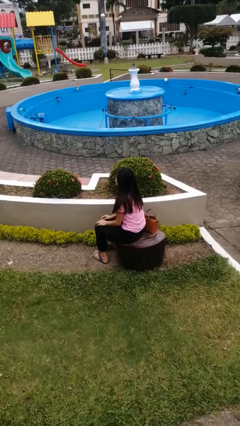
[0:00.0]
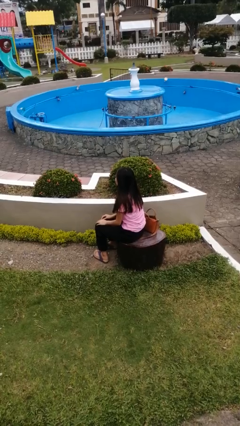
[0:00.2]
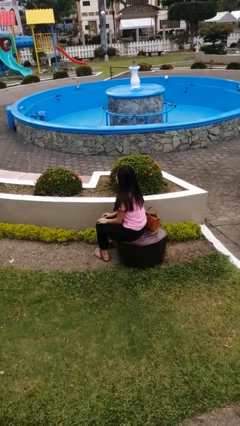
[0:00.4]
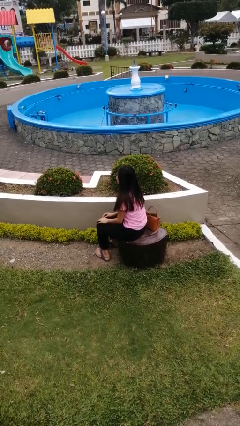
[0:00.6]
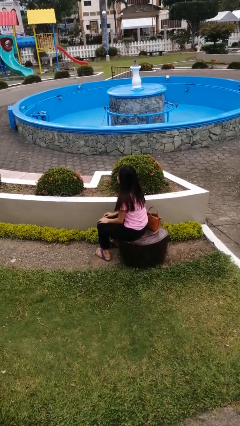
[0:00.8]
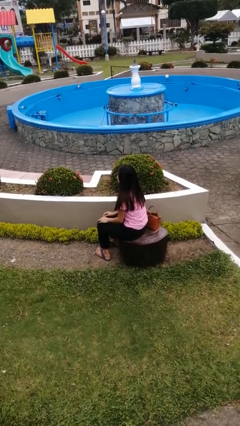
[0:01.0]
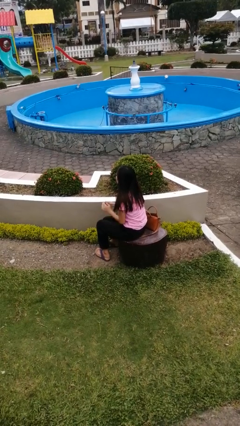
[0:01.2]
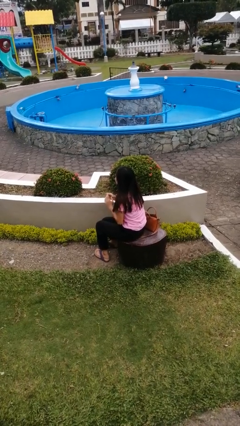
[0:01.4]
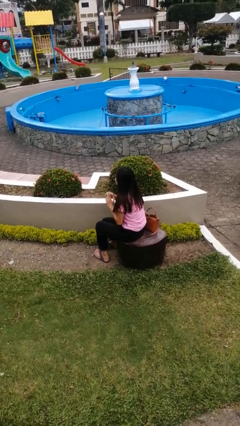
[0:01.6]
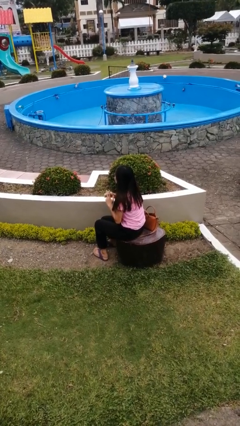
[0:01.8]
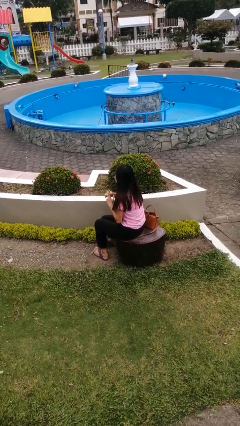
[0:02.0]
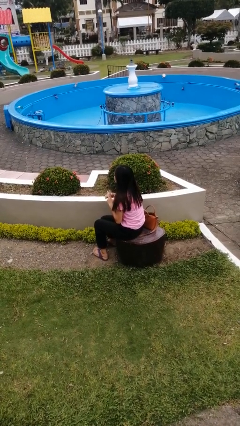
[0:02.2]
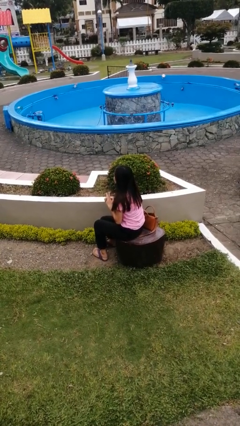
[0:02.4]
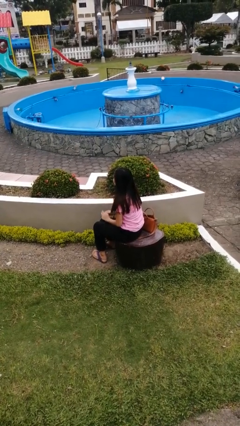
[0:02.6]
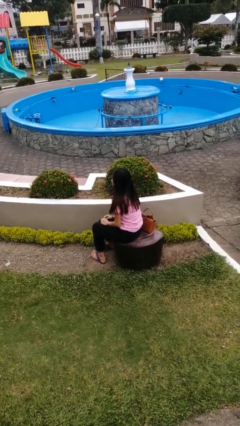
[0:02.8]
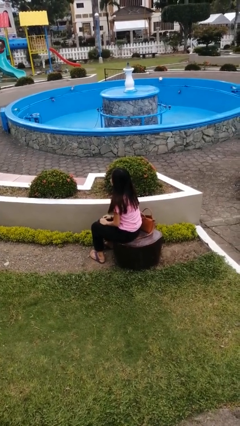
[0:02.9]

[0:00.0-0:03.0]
person puts on ring

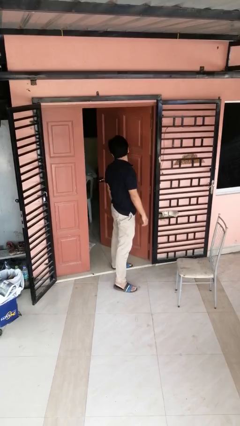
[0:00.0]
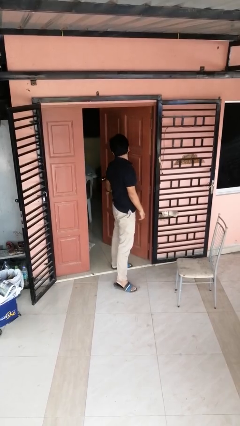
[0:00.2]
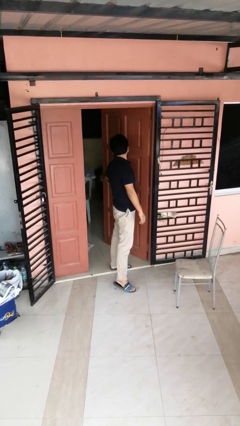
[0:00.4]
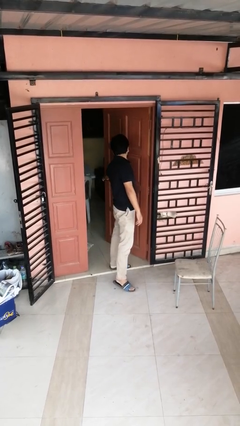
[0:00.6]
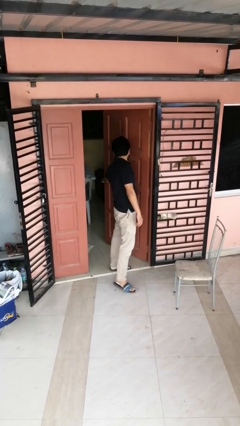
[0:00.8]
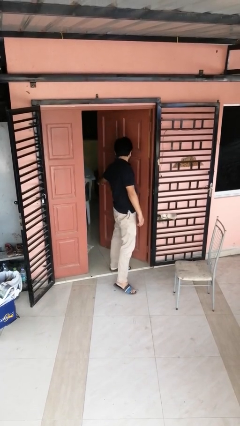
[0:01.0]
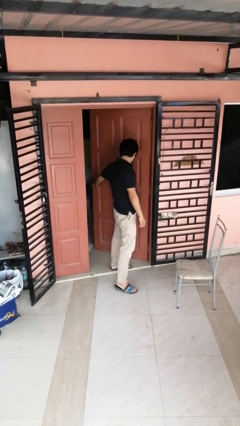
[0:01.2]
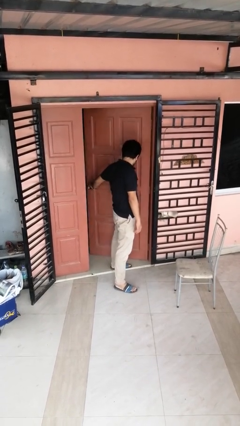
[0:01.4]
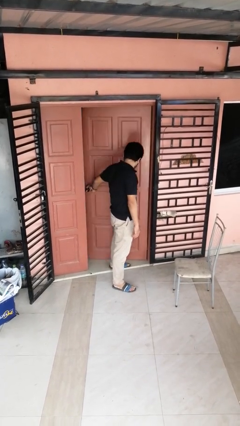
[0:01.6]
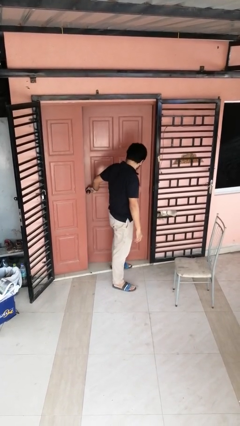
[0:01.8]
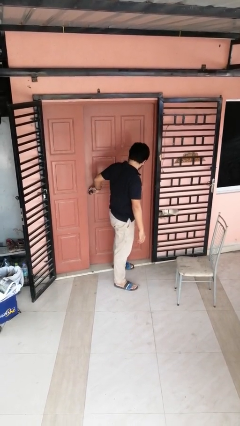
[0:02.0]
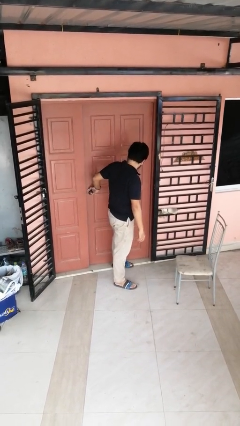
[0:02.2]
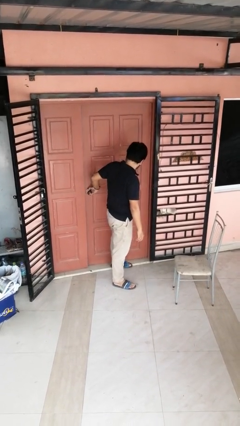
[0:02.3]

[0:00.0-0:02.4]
person closes door with hip

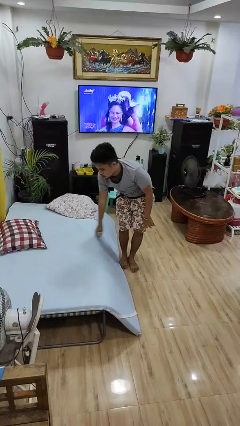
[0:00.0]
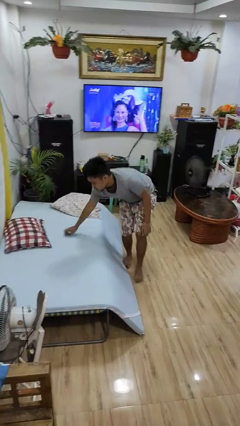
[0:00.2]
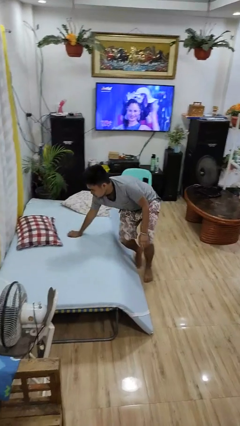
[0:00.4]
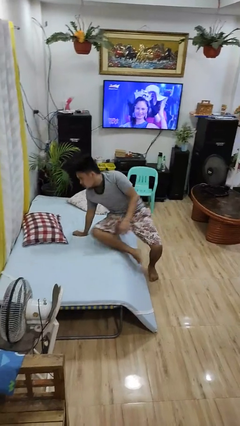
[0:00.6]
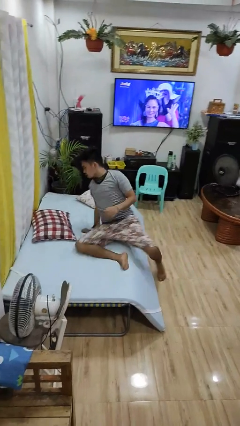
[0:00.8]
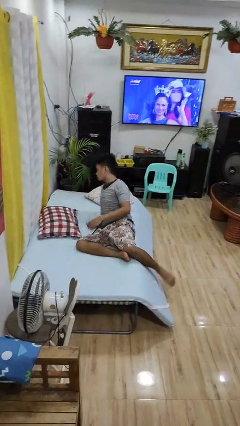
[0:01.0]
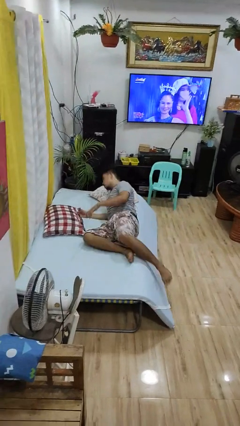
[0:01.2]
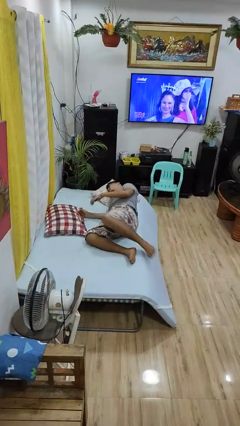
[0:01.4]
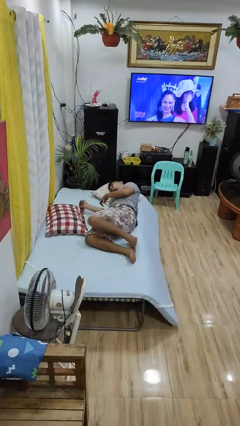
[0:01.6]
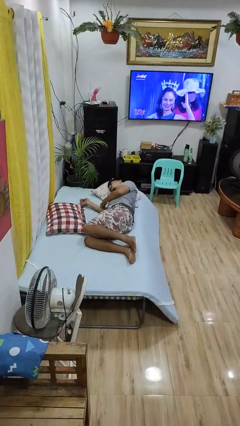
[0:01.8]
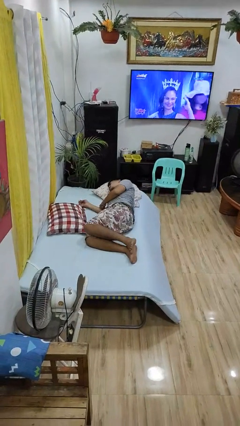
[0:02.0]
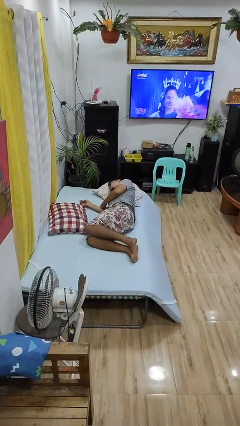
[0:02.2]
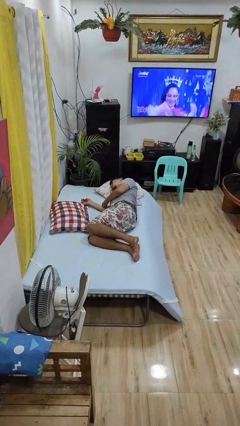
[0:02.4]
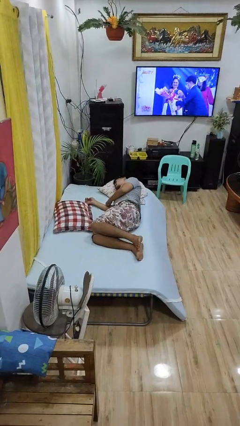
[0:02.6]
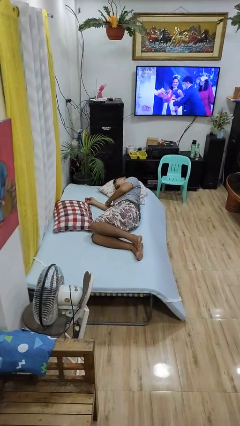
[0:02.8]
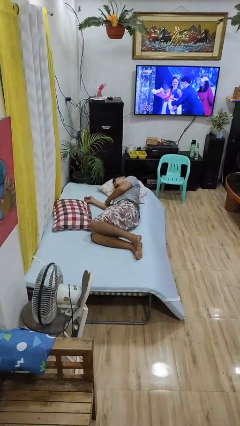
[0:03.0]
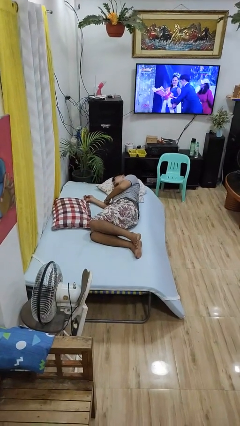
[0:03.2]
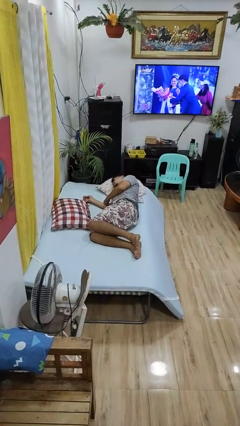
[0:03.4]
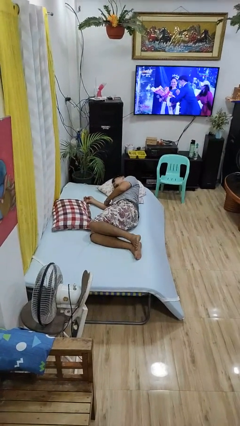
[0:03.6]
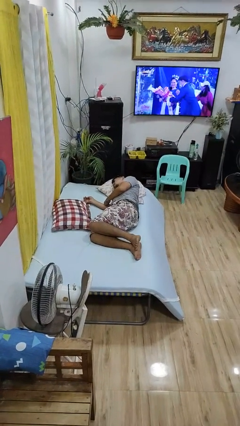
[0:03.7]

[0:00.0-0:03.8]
person lies down on bed

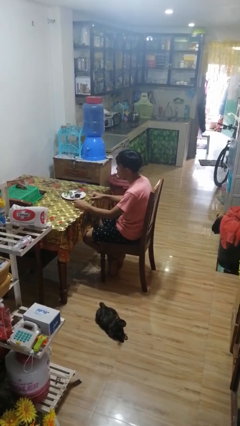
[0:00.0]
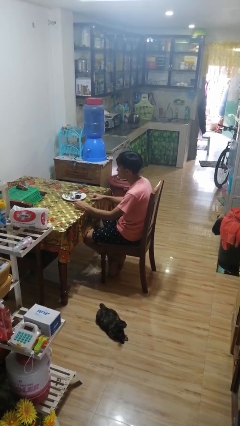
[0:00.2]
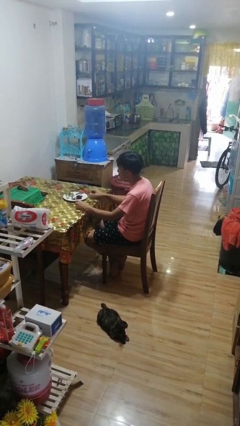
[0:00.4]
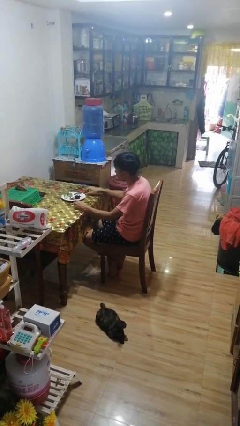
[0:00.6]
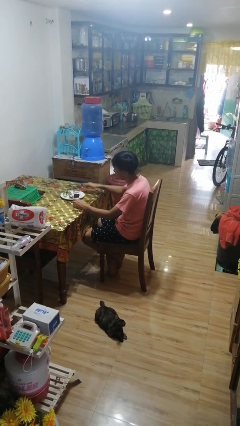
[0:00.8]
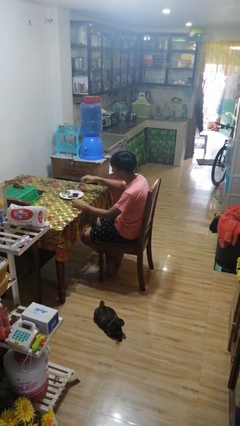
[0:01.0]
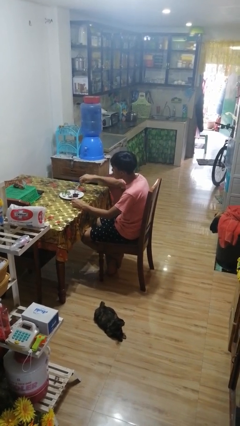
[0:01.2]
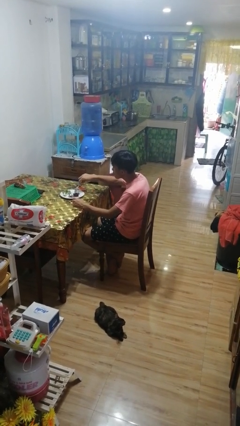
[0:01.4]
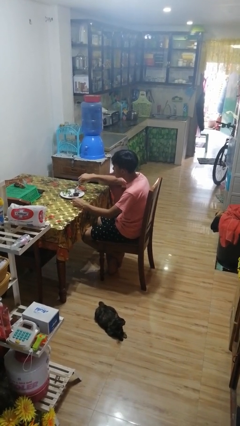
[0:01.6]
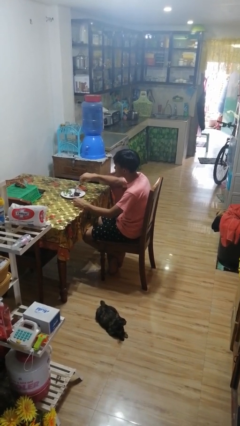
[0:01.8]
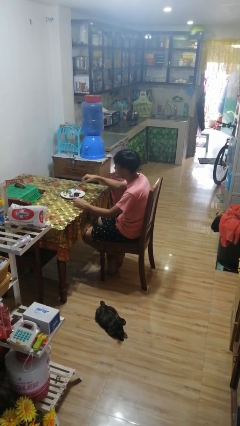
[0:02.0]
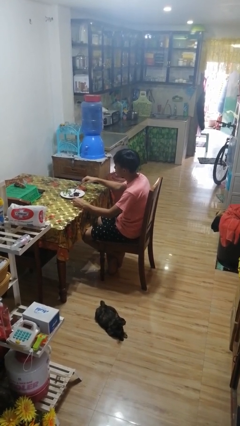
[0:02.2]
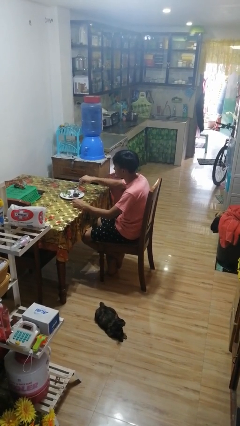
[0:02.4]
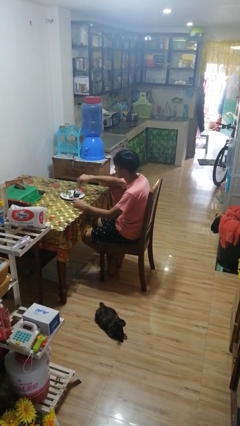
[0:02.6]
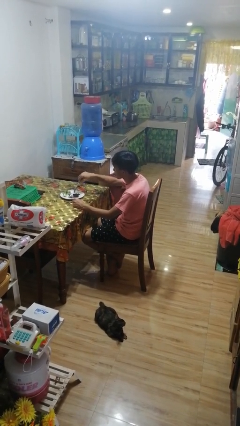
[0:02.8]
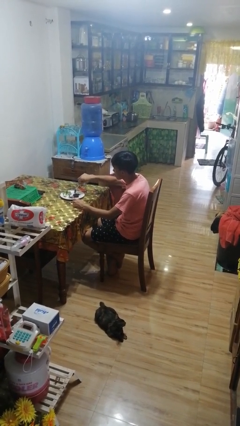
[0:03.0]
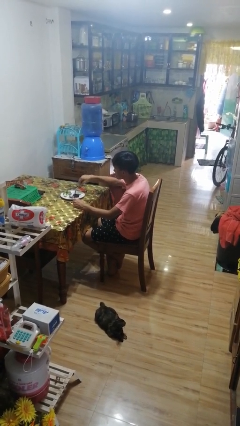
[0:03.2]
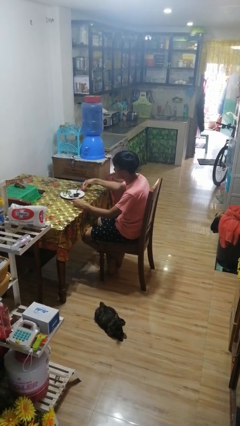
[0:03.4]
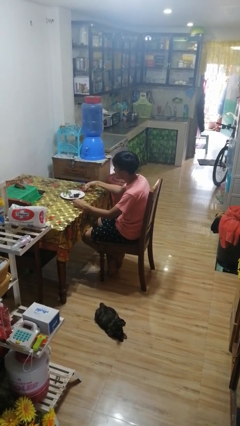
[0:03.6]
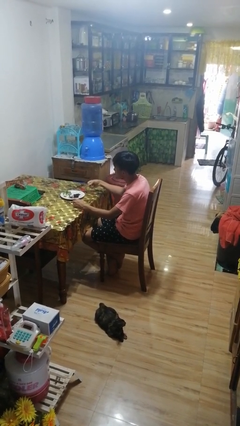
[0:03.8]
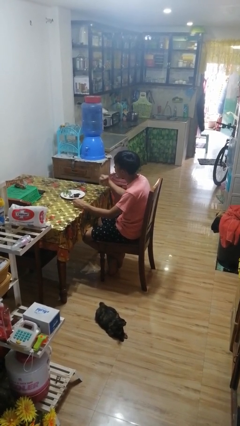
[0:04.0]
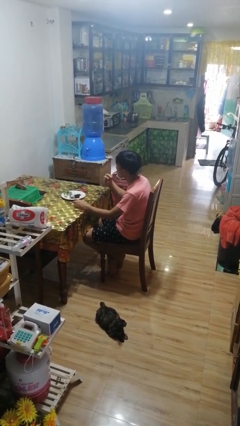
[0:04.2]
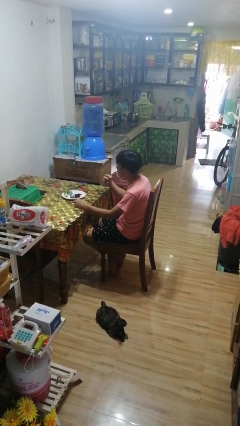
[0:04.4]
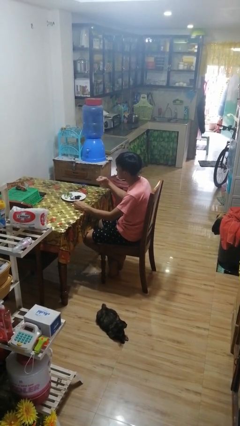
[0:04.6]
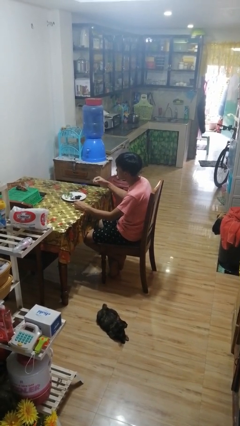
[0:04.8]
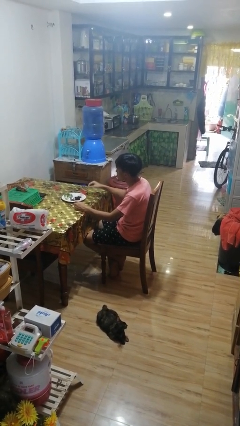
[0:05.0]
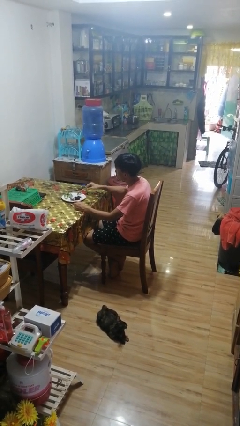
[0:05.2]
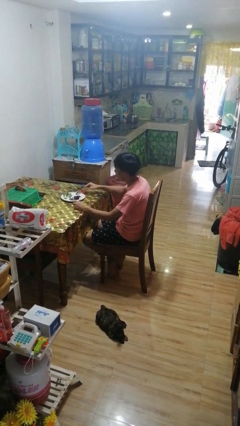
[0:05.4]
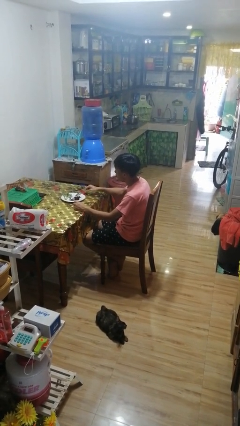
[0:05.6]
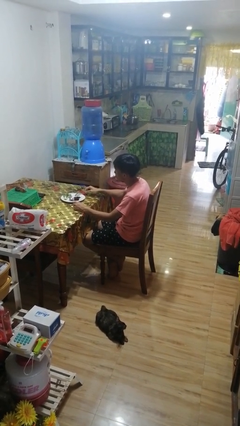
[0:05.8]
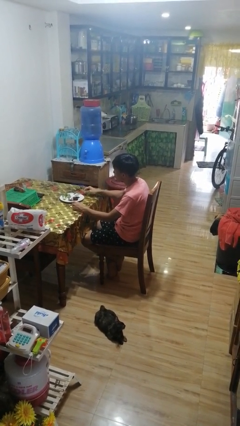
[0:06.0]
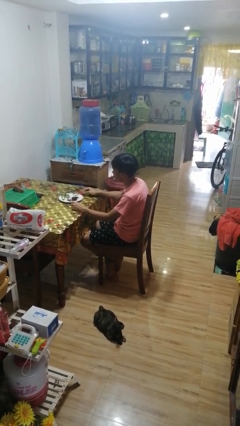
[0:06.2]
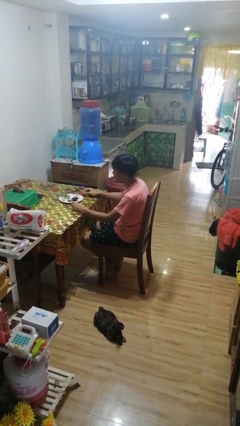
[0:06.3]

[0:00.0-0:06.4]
person eats with utensil

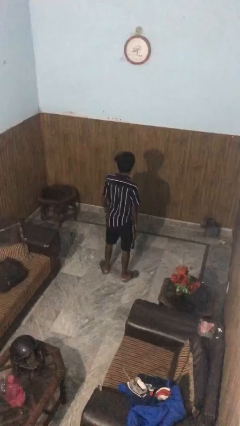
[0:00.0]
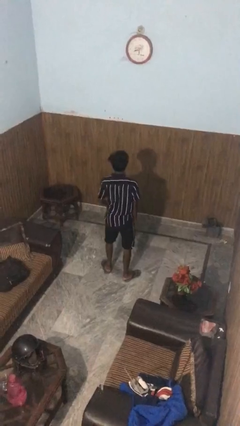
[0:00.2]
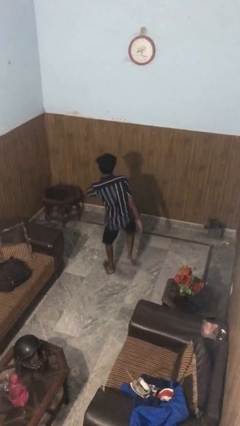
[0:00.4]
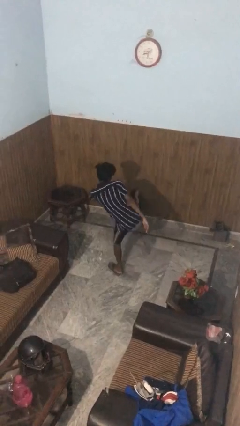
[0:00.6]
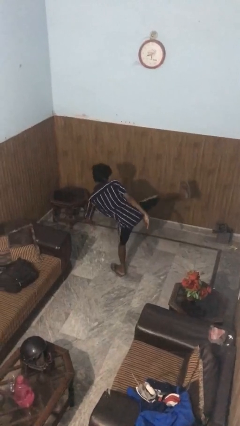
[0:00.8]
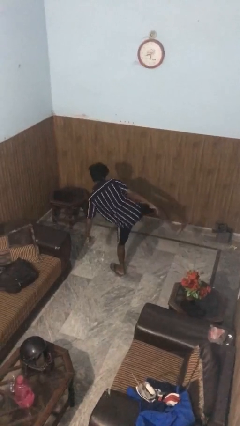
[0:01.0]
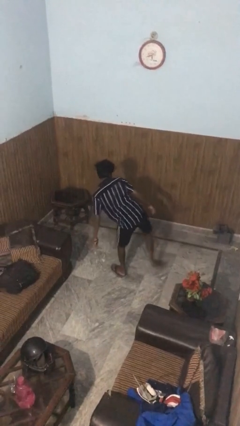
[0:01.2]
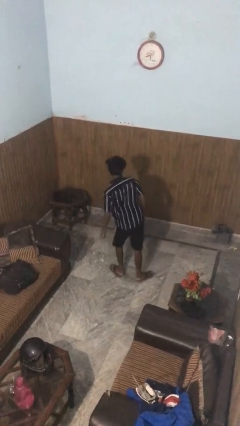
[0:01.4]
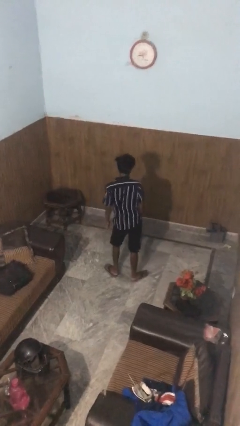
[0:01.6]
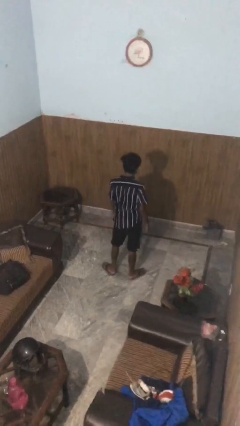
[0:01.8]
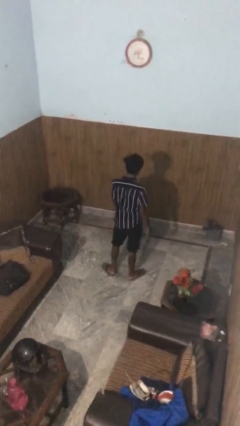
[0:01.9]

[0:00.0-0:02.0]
person karate kicks
